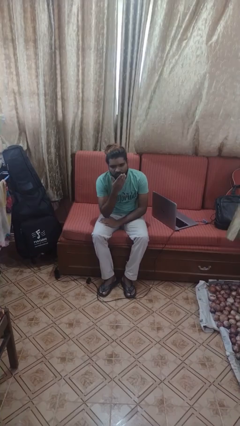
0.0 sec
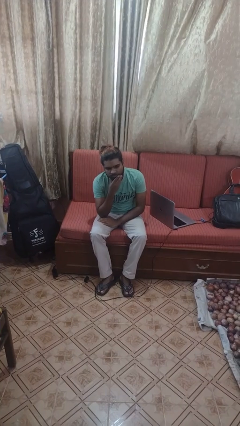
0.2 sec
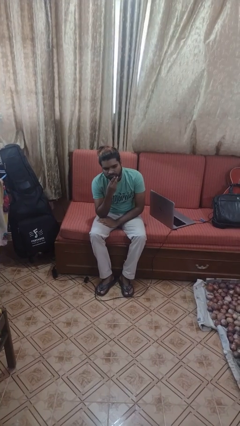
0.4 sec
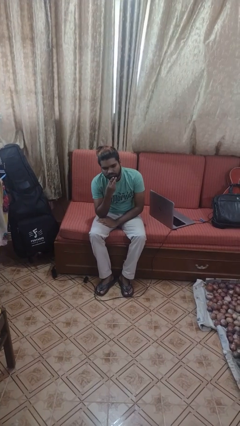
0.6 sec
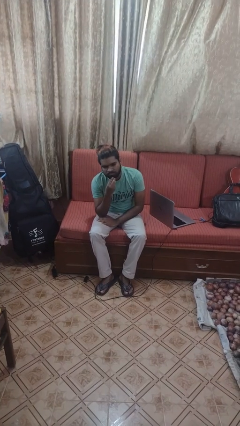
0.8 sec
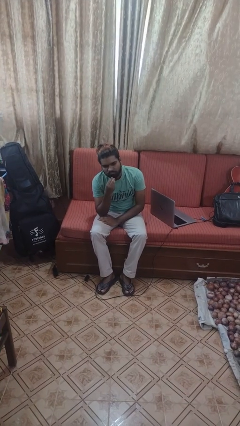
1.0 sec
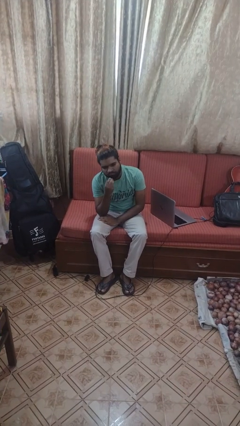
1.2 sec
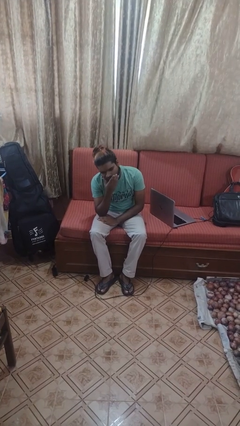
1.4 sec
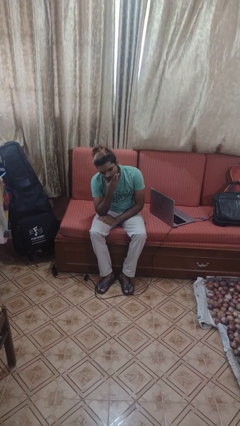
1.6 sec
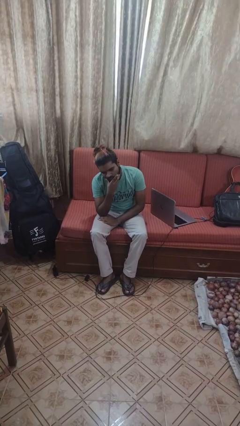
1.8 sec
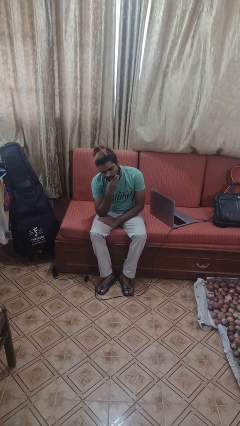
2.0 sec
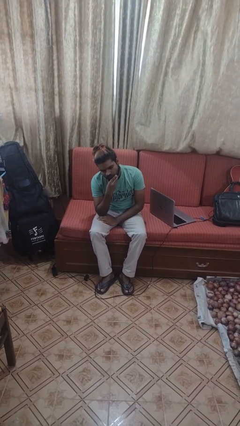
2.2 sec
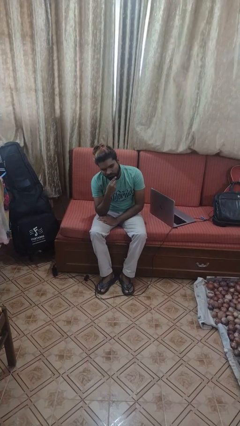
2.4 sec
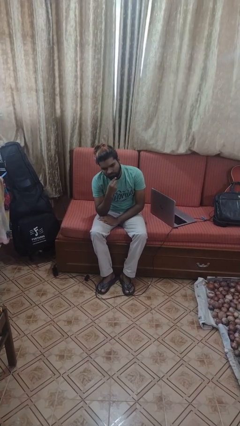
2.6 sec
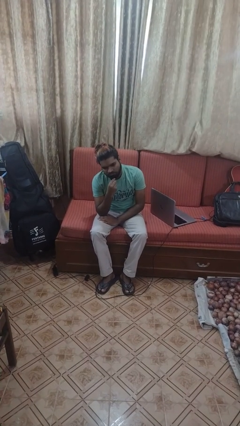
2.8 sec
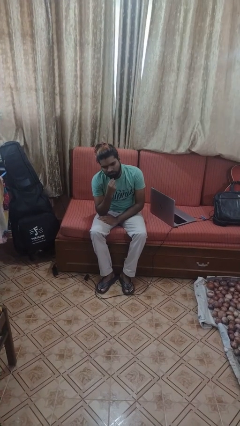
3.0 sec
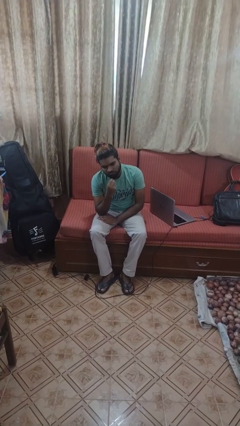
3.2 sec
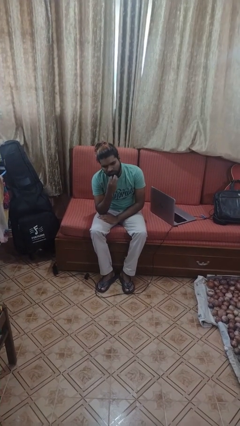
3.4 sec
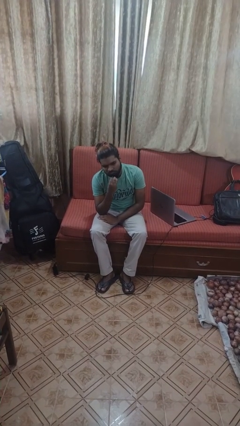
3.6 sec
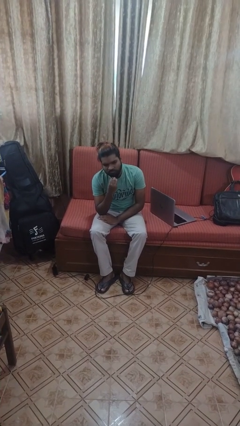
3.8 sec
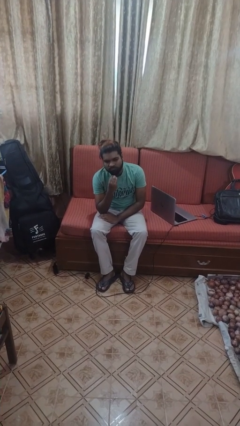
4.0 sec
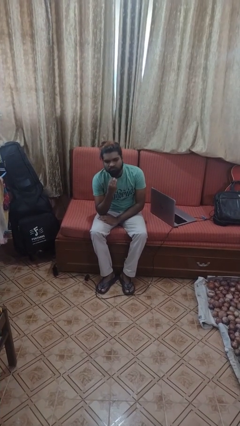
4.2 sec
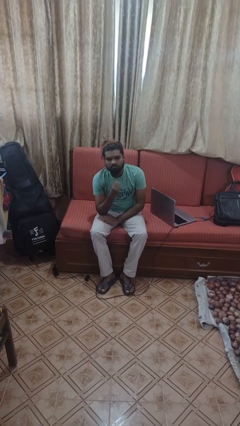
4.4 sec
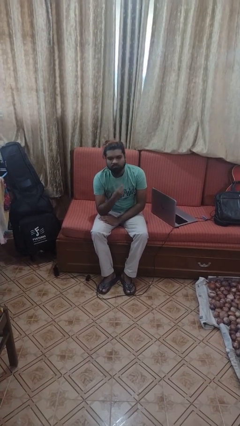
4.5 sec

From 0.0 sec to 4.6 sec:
person strokes chin

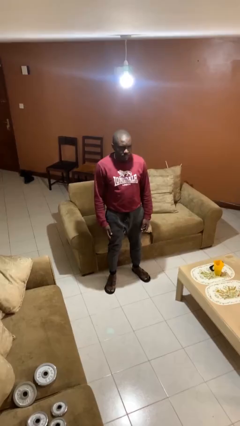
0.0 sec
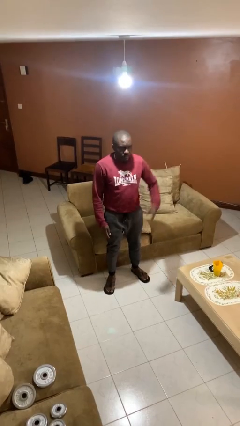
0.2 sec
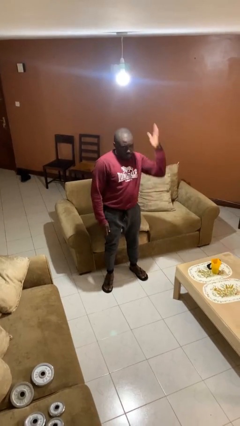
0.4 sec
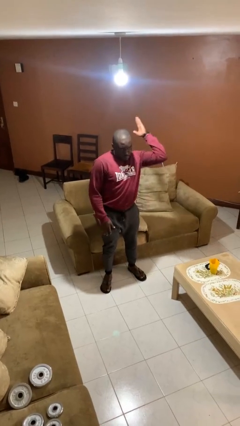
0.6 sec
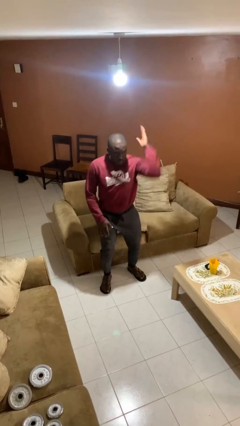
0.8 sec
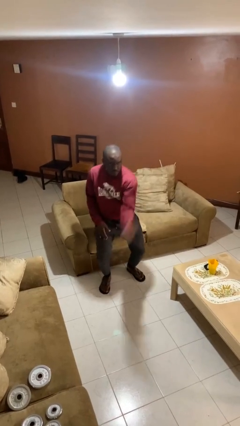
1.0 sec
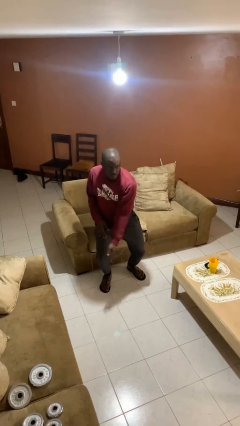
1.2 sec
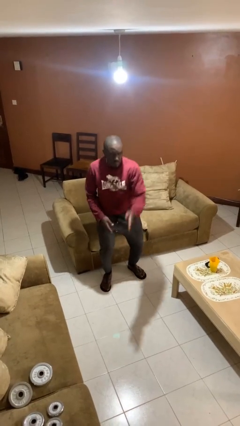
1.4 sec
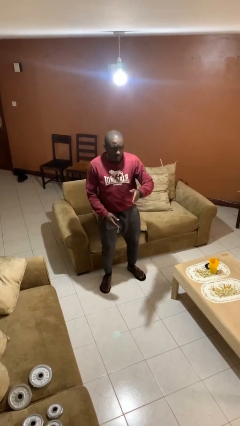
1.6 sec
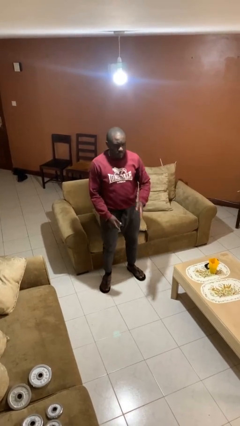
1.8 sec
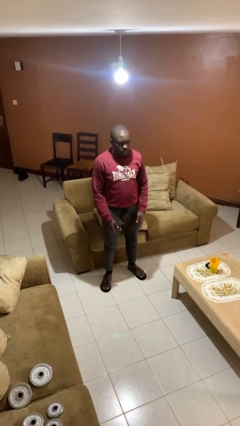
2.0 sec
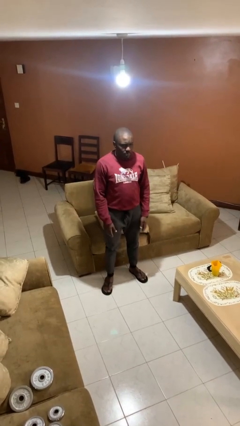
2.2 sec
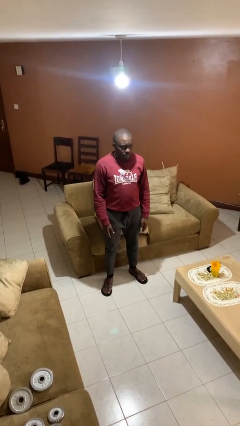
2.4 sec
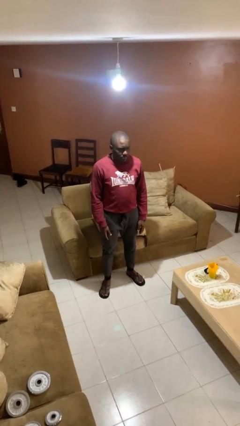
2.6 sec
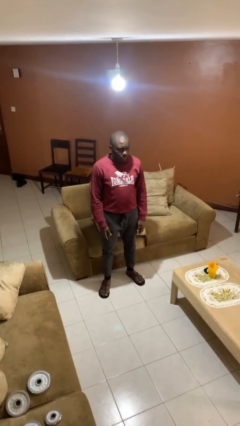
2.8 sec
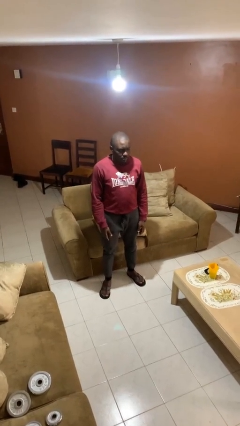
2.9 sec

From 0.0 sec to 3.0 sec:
person karate chop

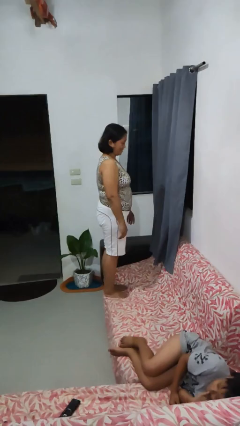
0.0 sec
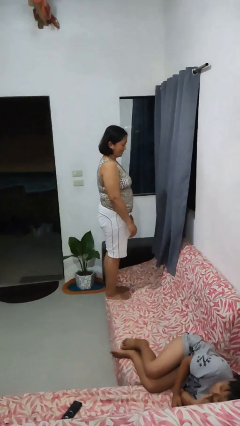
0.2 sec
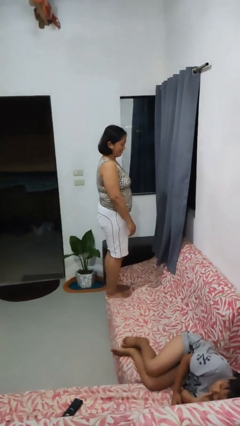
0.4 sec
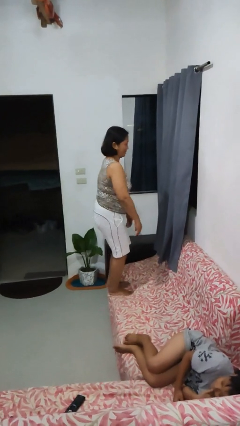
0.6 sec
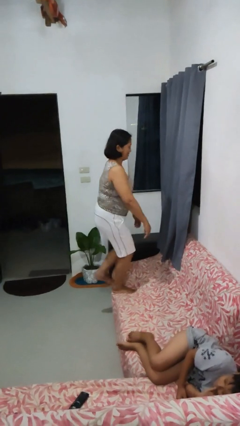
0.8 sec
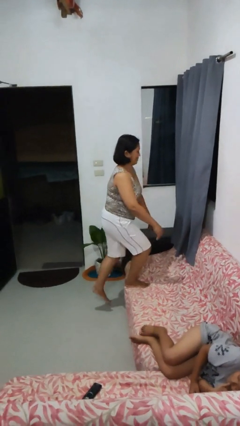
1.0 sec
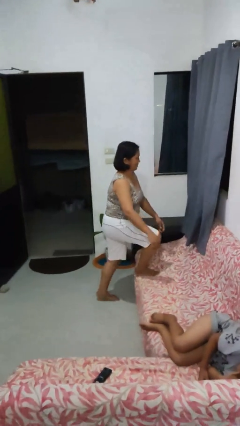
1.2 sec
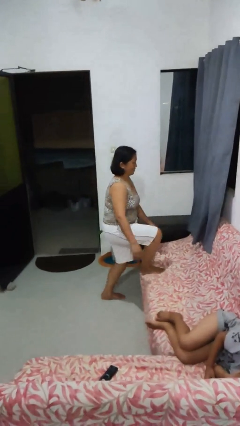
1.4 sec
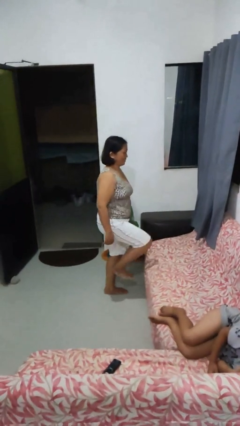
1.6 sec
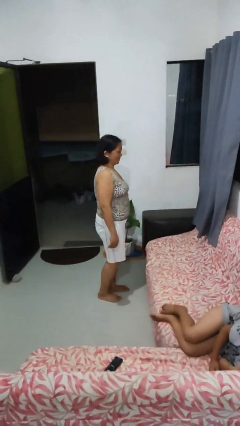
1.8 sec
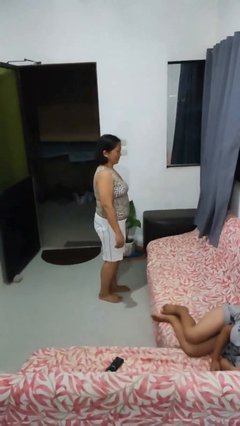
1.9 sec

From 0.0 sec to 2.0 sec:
person climbs off couch

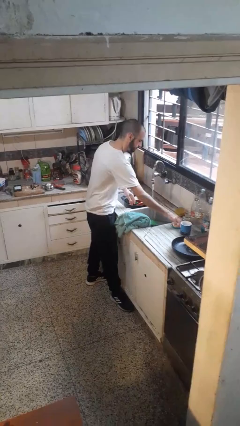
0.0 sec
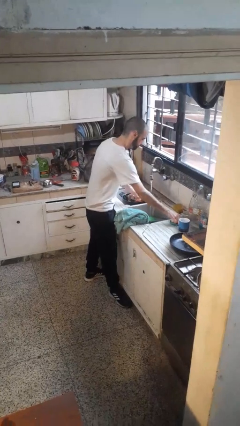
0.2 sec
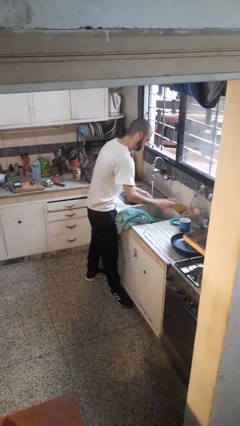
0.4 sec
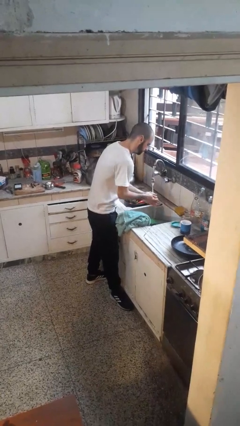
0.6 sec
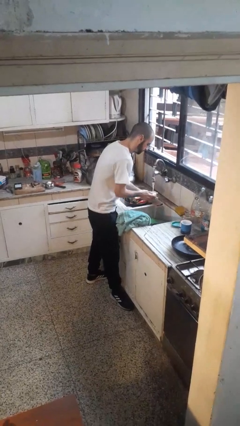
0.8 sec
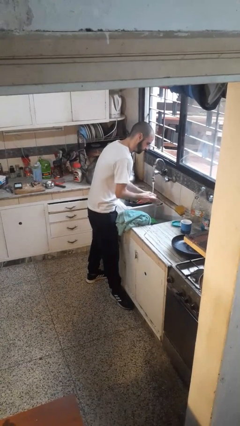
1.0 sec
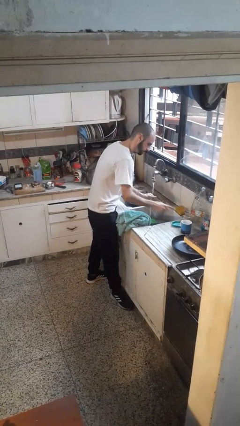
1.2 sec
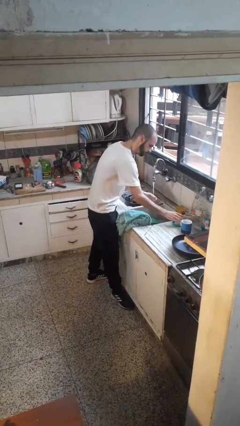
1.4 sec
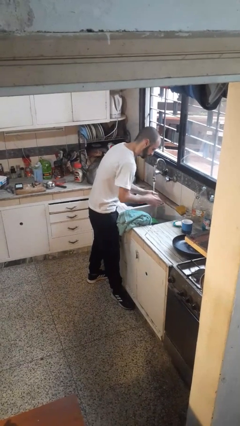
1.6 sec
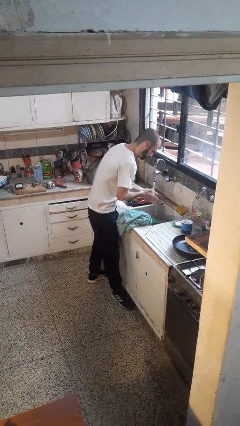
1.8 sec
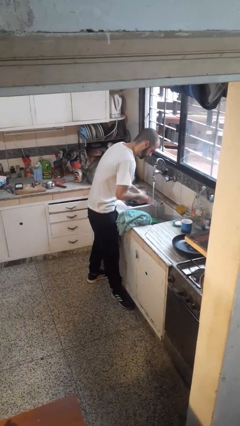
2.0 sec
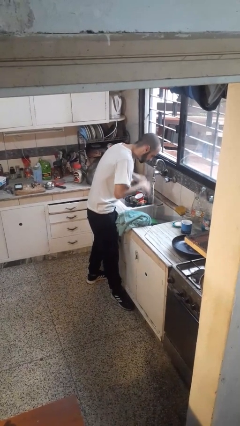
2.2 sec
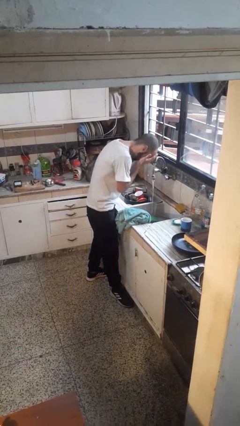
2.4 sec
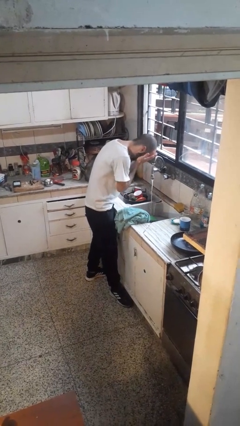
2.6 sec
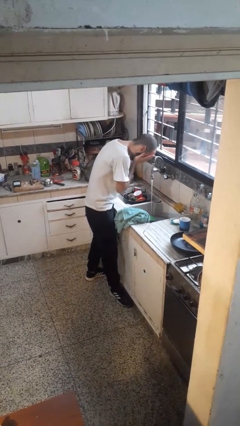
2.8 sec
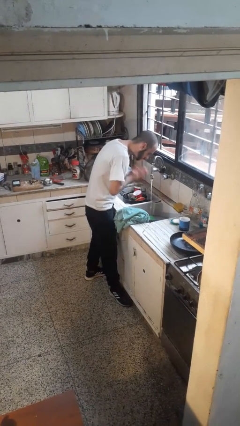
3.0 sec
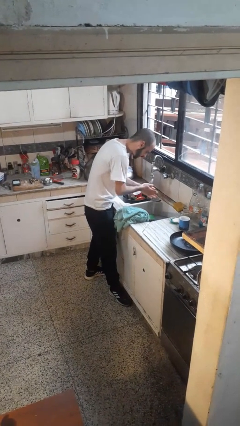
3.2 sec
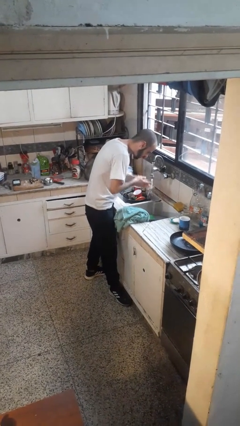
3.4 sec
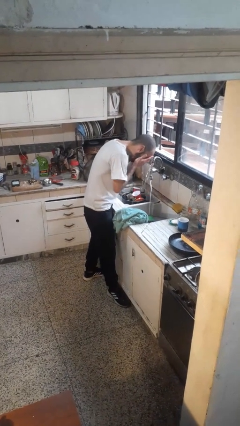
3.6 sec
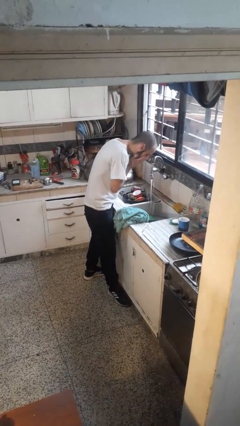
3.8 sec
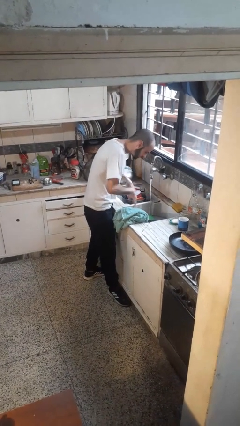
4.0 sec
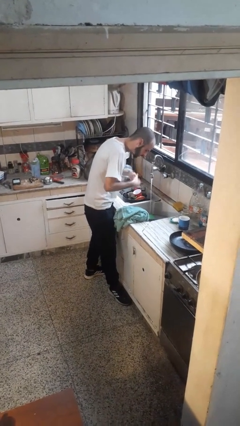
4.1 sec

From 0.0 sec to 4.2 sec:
person washes face

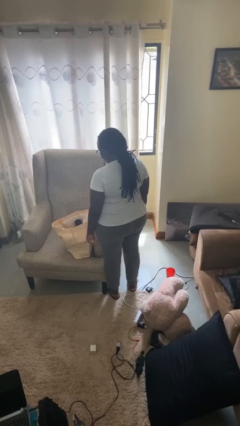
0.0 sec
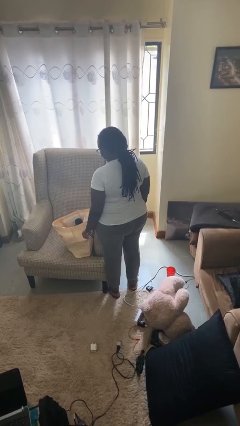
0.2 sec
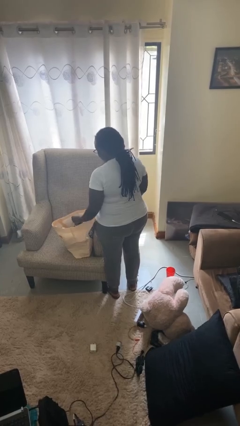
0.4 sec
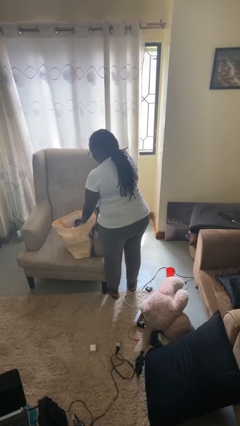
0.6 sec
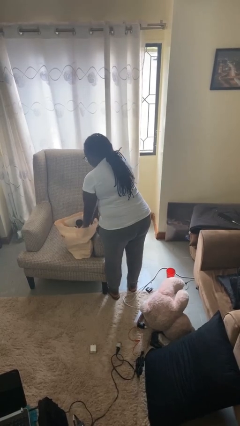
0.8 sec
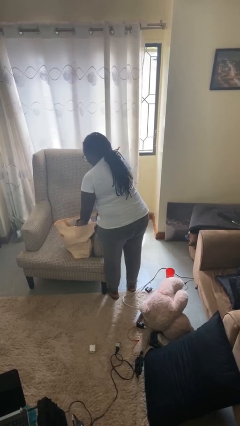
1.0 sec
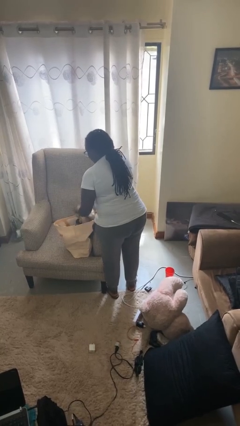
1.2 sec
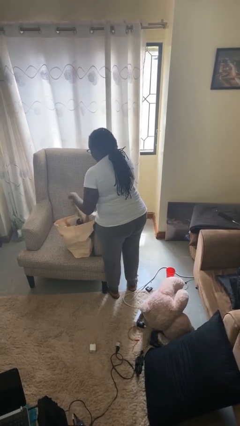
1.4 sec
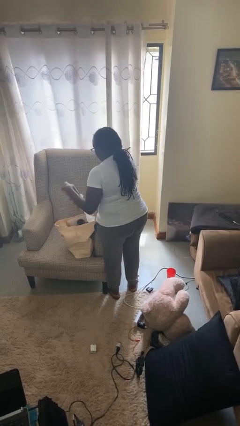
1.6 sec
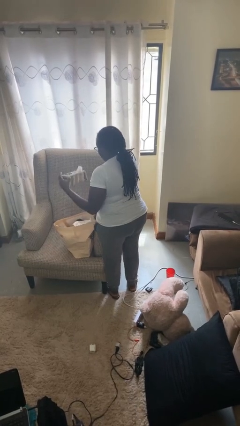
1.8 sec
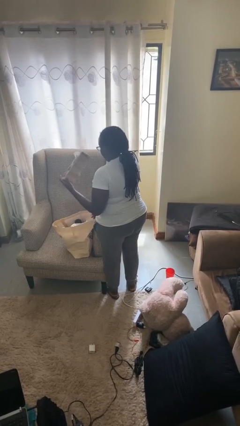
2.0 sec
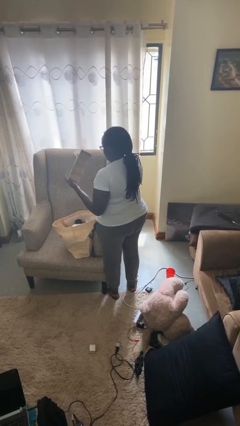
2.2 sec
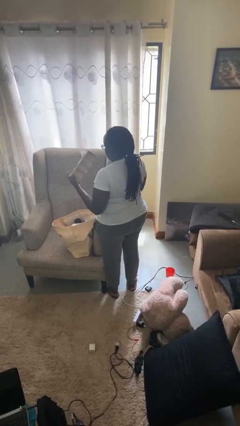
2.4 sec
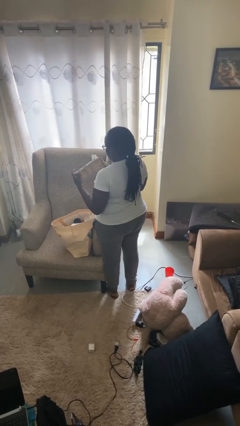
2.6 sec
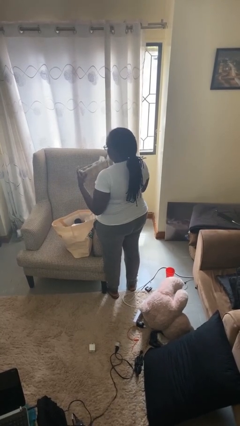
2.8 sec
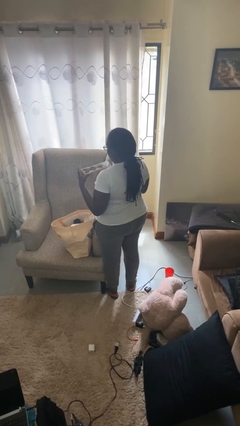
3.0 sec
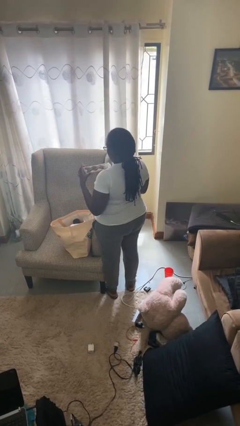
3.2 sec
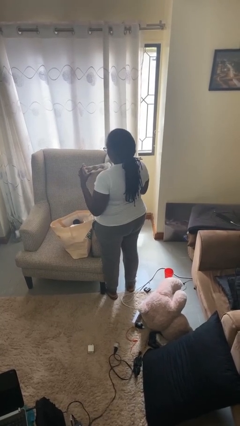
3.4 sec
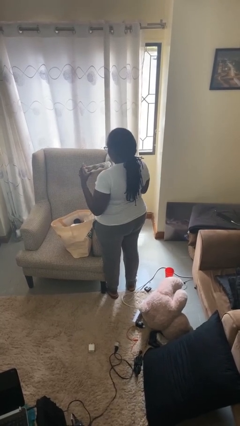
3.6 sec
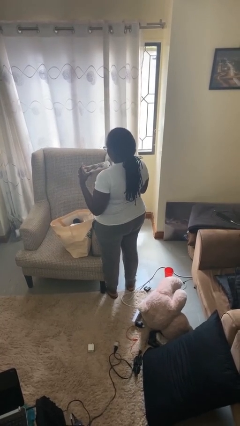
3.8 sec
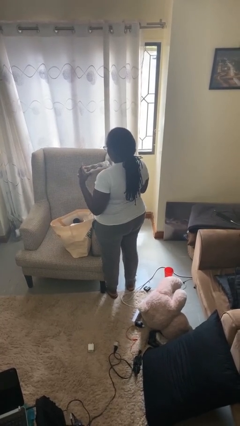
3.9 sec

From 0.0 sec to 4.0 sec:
person takes object from bag
